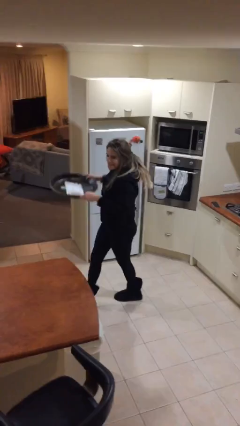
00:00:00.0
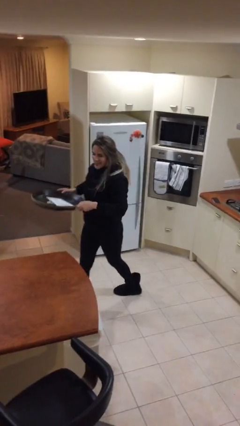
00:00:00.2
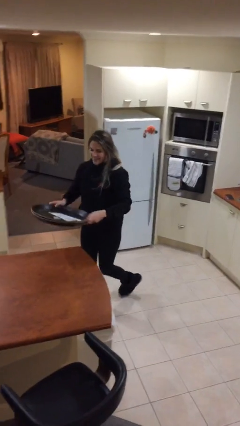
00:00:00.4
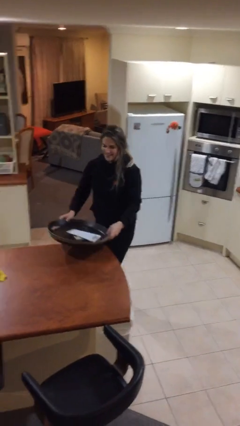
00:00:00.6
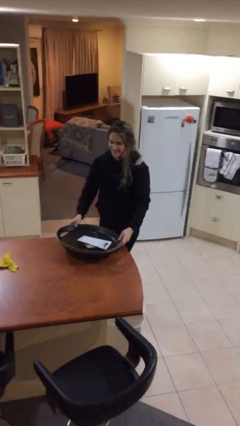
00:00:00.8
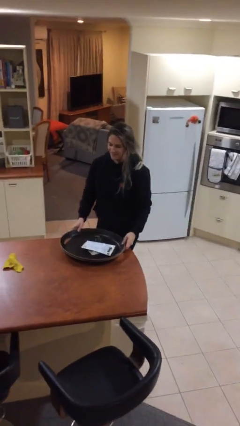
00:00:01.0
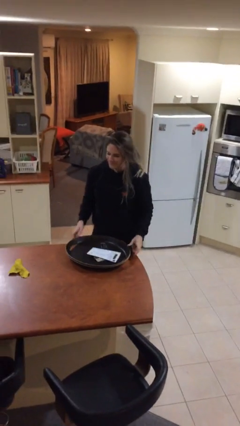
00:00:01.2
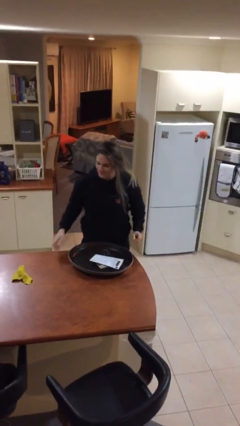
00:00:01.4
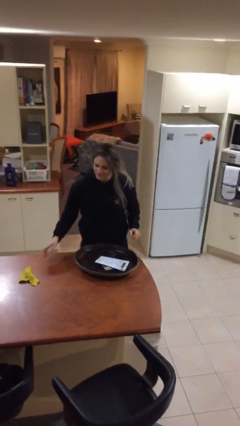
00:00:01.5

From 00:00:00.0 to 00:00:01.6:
person puts down object on table

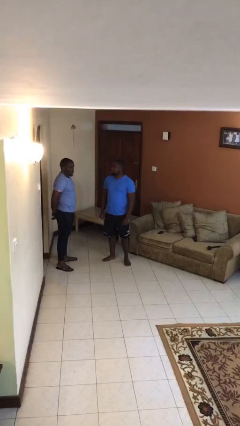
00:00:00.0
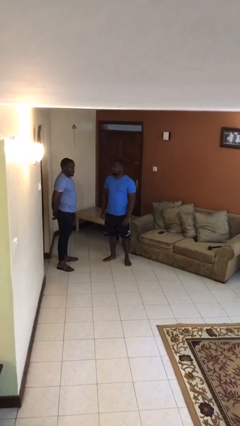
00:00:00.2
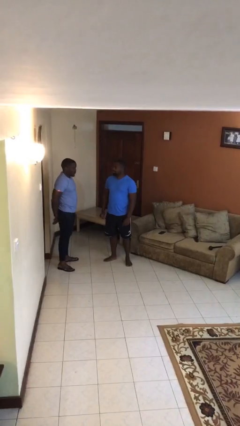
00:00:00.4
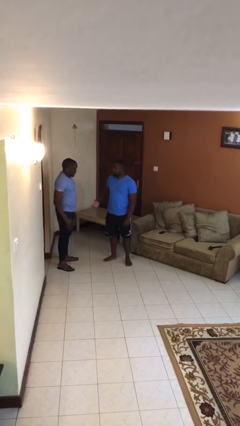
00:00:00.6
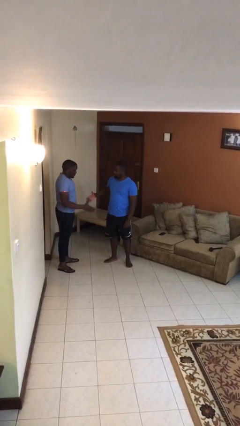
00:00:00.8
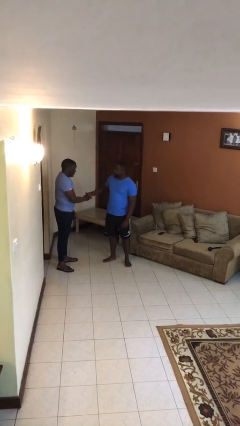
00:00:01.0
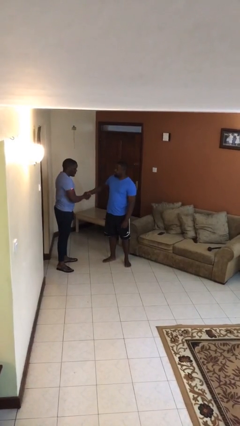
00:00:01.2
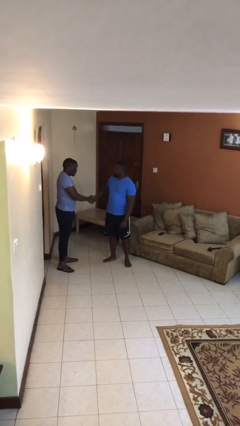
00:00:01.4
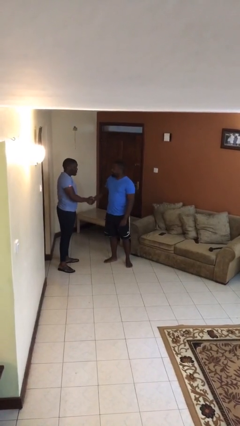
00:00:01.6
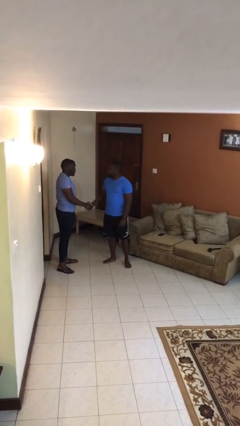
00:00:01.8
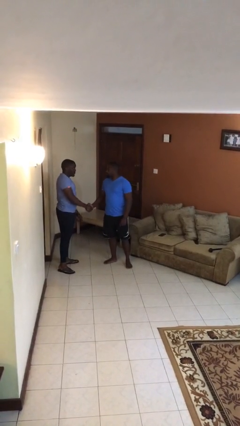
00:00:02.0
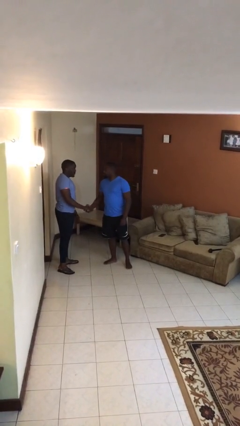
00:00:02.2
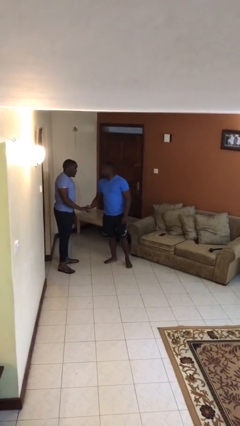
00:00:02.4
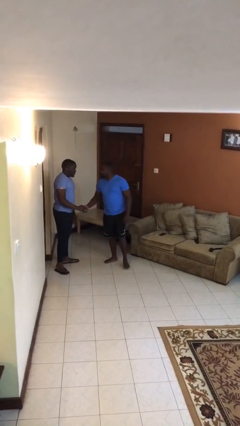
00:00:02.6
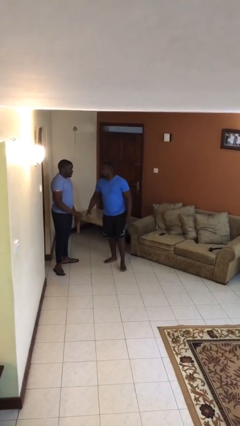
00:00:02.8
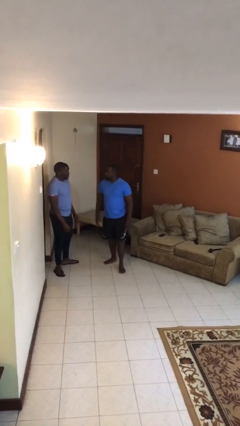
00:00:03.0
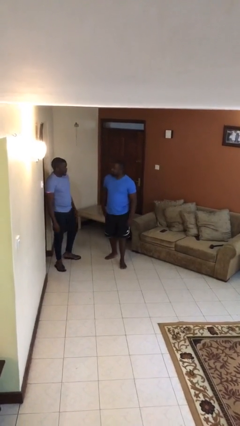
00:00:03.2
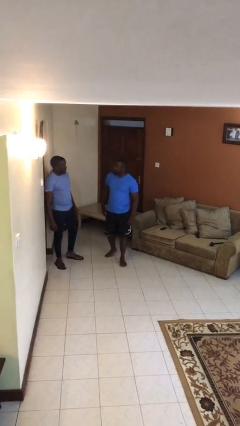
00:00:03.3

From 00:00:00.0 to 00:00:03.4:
person shakes hand

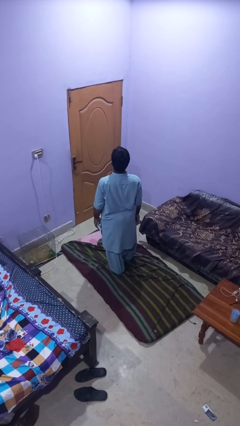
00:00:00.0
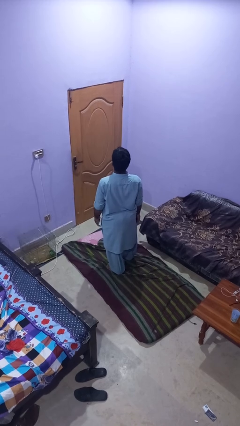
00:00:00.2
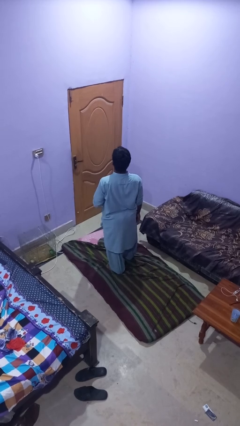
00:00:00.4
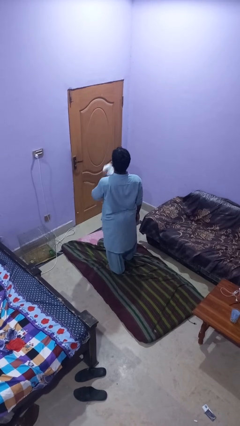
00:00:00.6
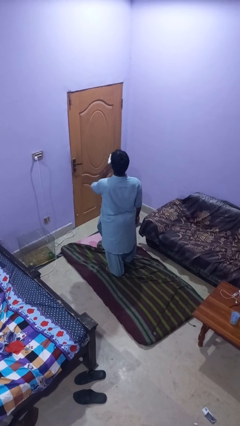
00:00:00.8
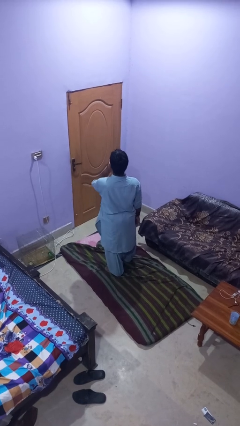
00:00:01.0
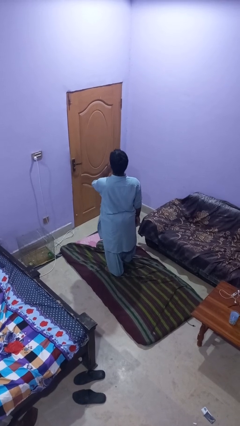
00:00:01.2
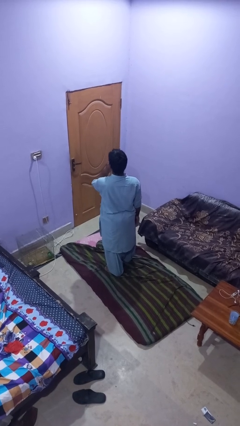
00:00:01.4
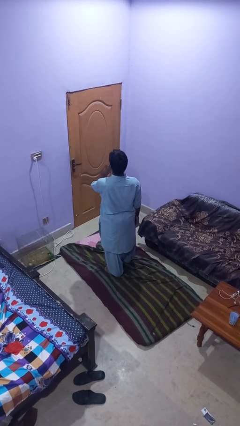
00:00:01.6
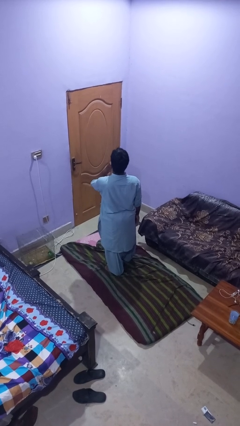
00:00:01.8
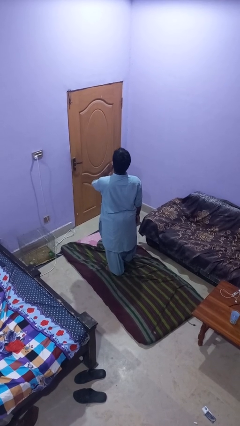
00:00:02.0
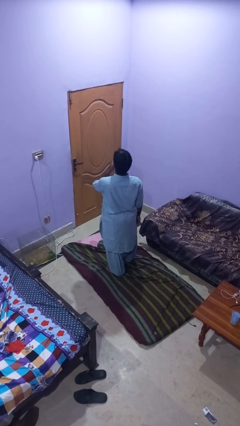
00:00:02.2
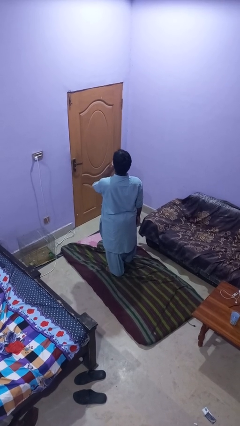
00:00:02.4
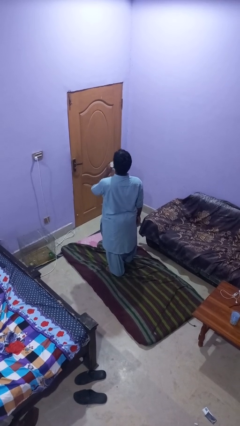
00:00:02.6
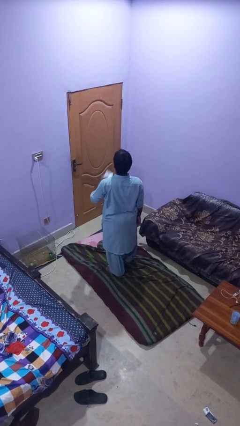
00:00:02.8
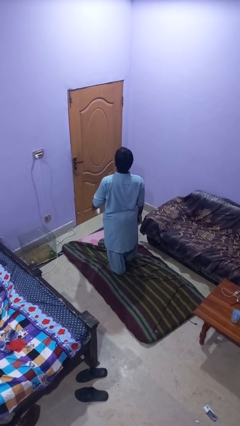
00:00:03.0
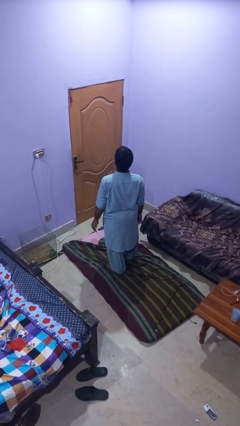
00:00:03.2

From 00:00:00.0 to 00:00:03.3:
person wipes mouth with napkin

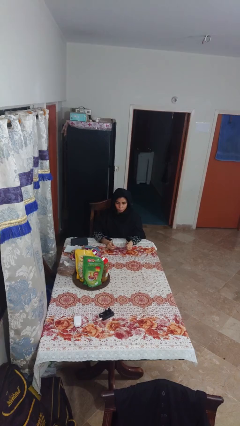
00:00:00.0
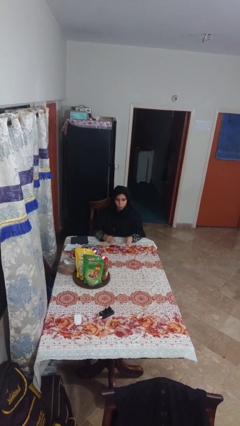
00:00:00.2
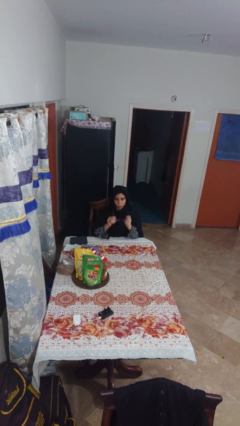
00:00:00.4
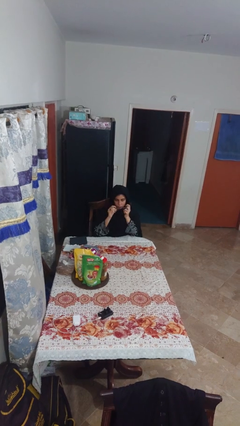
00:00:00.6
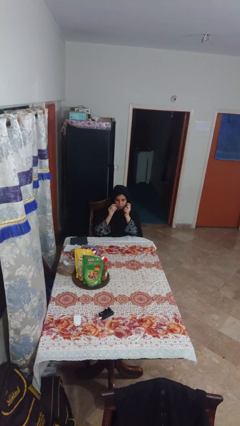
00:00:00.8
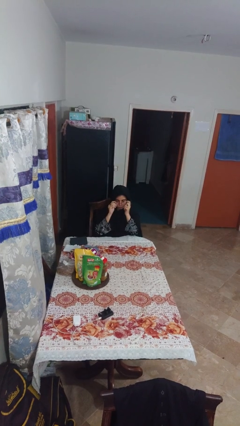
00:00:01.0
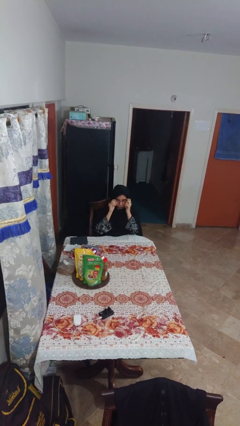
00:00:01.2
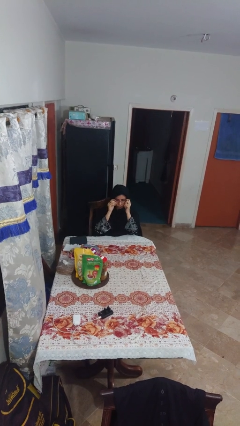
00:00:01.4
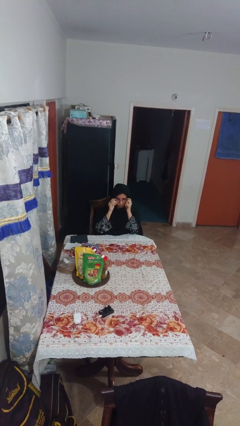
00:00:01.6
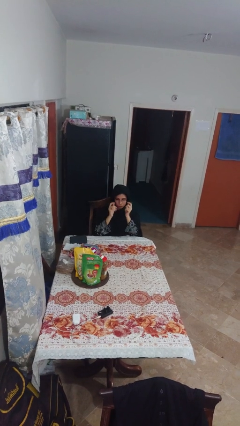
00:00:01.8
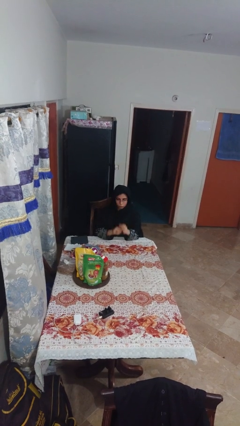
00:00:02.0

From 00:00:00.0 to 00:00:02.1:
person puts on glasses

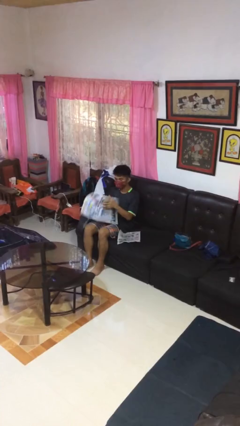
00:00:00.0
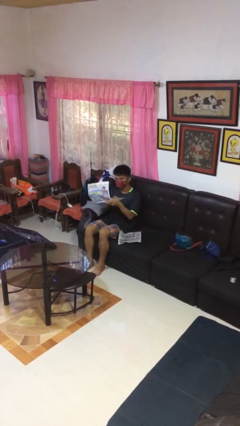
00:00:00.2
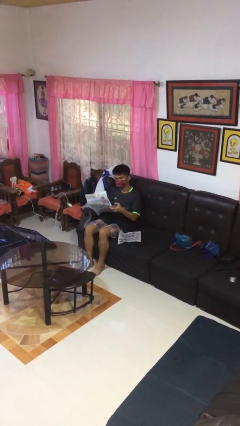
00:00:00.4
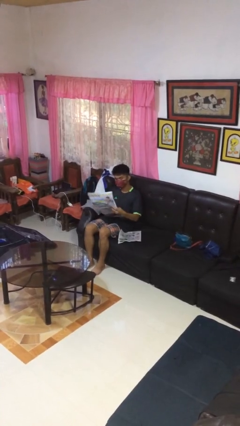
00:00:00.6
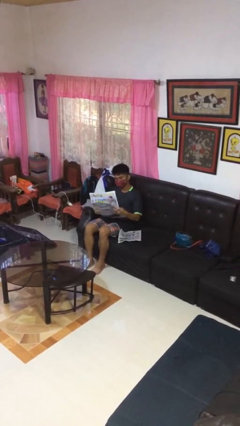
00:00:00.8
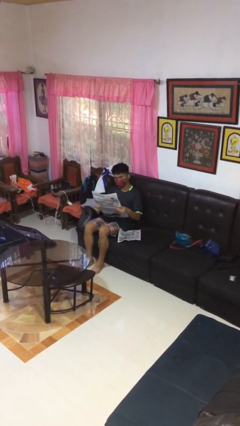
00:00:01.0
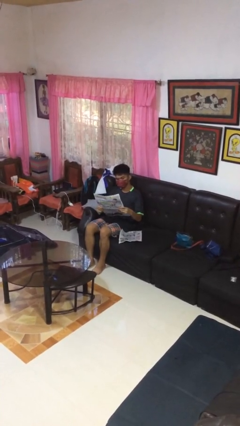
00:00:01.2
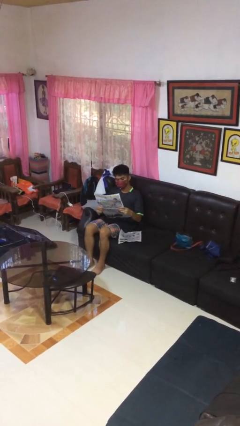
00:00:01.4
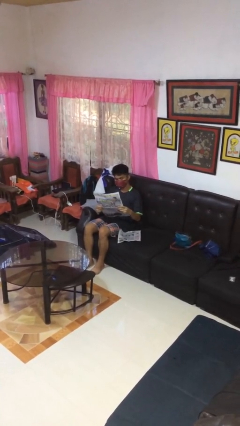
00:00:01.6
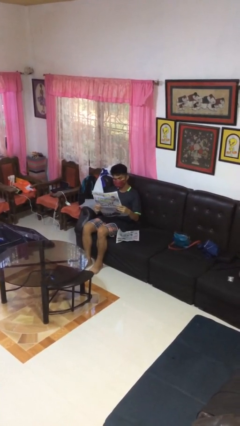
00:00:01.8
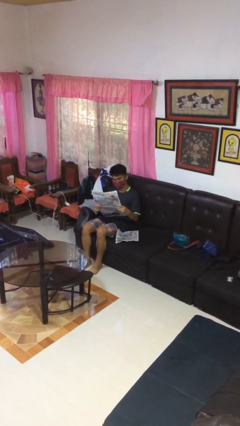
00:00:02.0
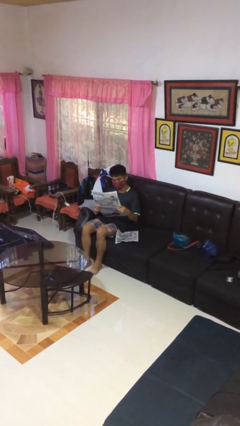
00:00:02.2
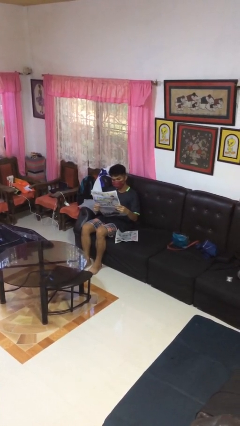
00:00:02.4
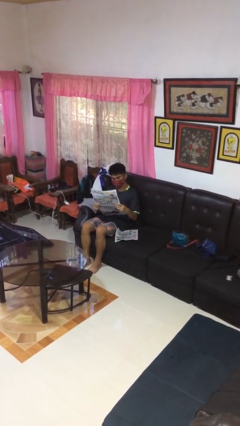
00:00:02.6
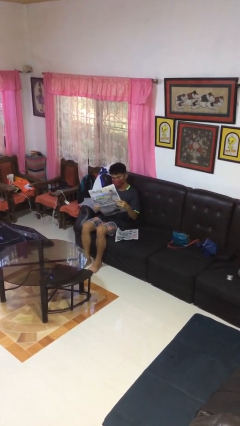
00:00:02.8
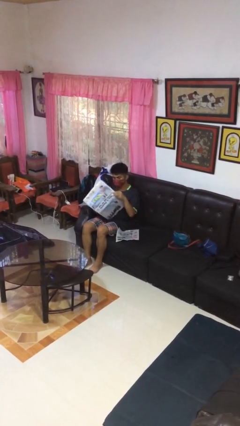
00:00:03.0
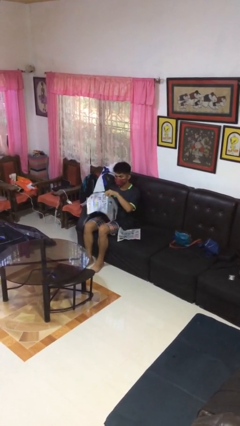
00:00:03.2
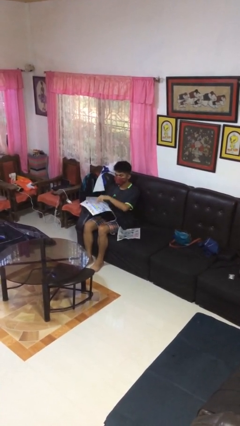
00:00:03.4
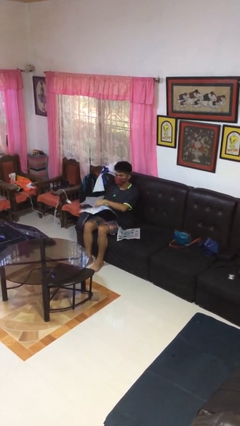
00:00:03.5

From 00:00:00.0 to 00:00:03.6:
person reads newspaper

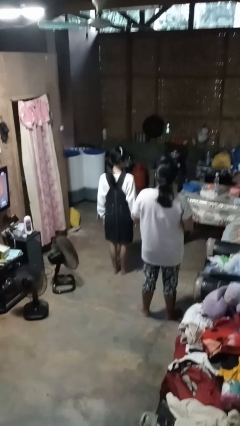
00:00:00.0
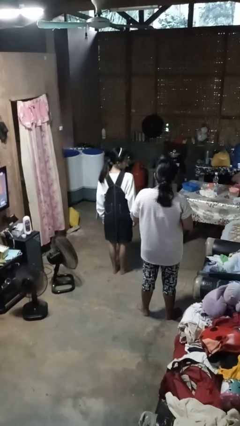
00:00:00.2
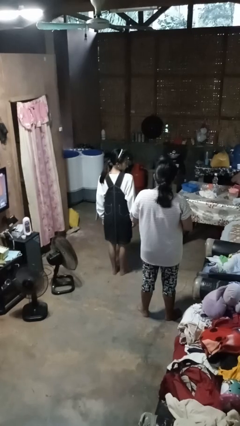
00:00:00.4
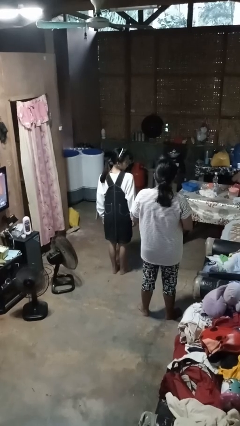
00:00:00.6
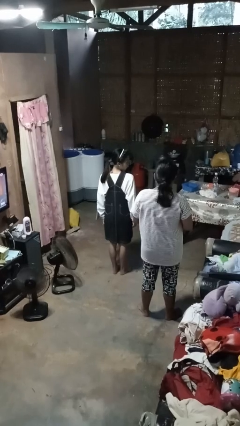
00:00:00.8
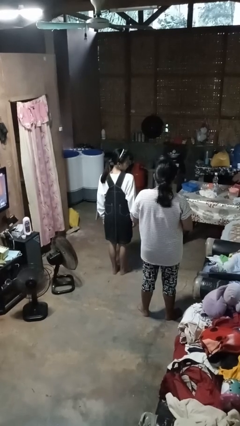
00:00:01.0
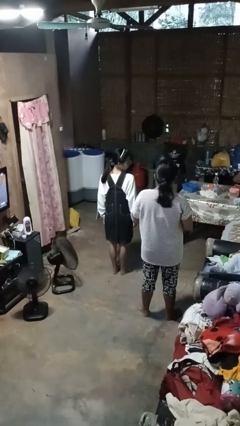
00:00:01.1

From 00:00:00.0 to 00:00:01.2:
person looks over shoulder

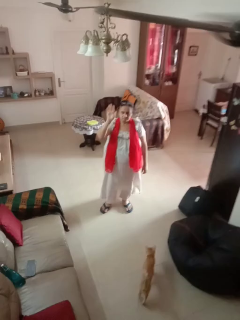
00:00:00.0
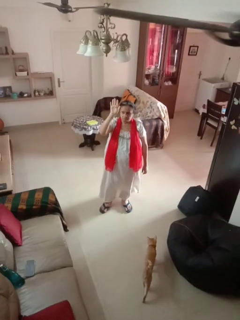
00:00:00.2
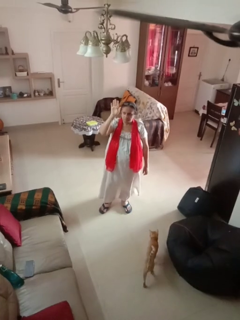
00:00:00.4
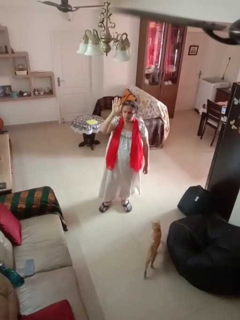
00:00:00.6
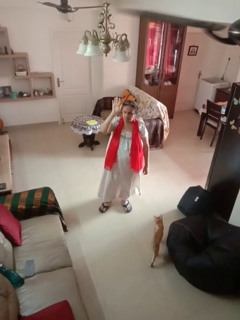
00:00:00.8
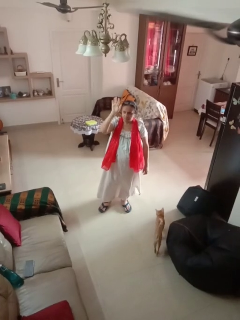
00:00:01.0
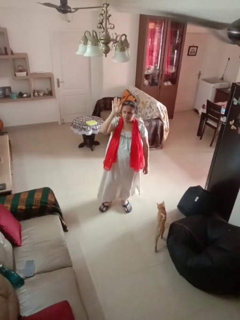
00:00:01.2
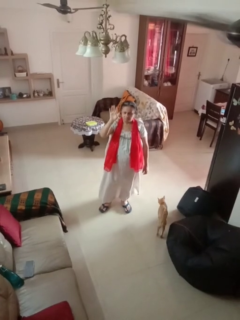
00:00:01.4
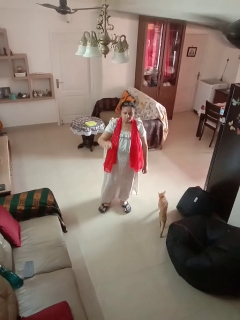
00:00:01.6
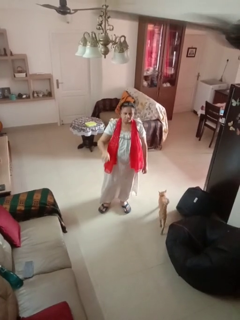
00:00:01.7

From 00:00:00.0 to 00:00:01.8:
person gestures raise hand

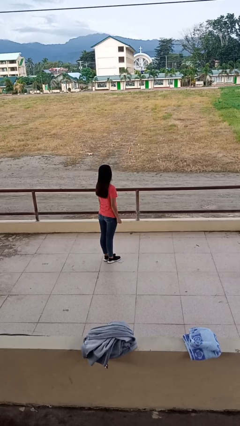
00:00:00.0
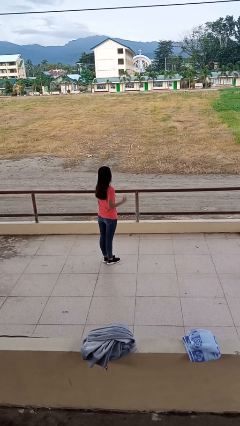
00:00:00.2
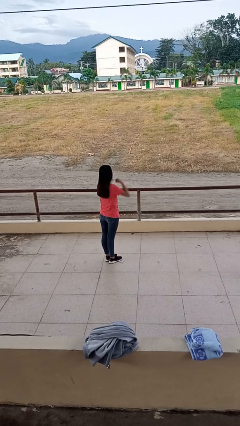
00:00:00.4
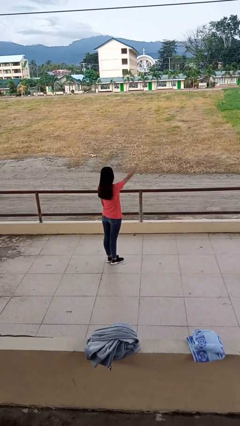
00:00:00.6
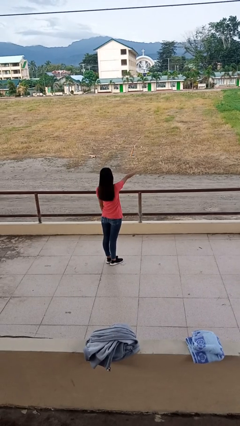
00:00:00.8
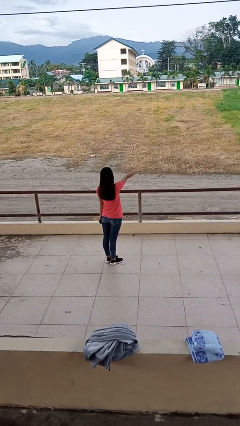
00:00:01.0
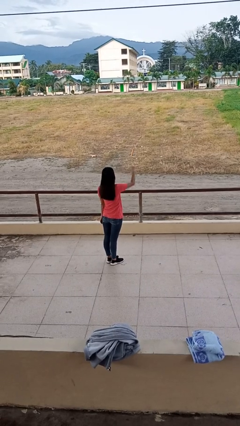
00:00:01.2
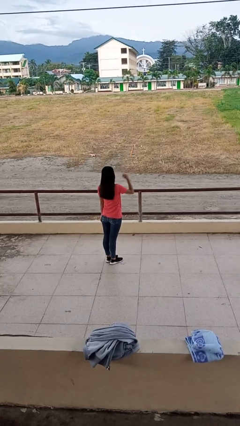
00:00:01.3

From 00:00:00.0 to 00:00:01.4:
person punches
